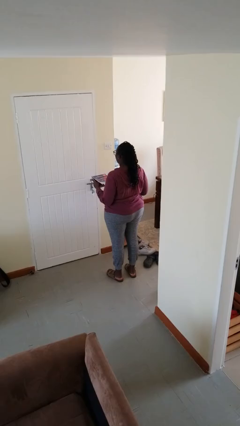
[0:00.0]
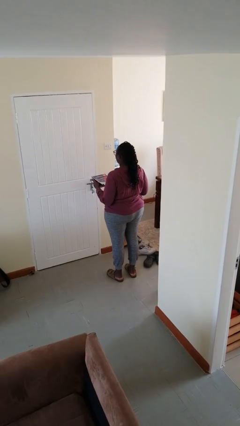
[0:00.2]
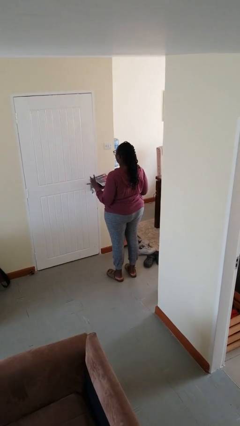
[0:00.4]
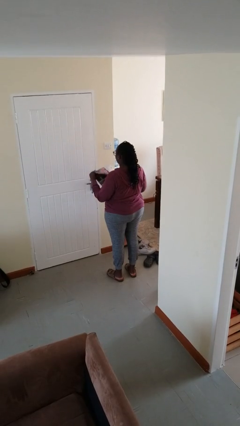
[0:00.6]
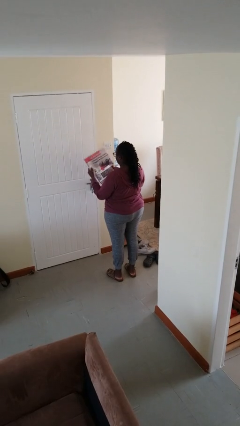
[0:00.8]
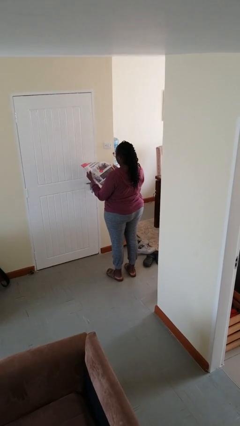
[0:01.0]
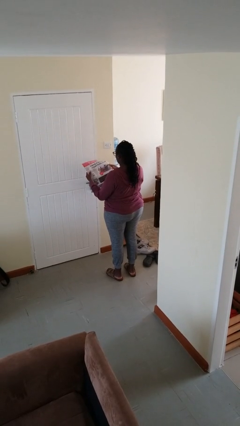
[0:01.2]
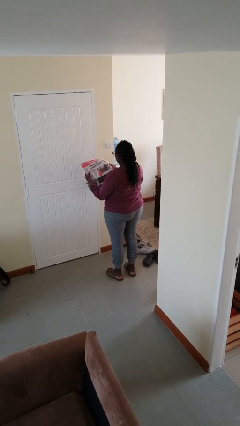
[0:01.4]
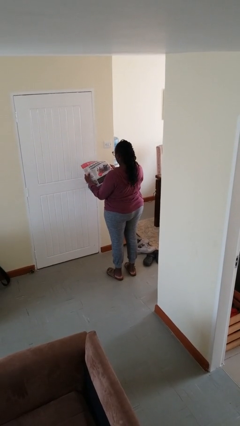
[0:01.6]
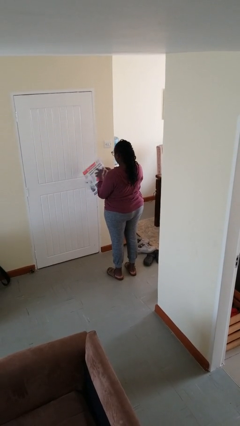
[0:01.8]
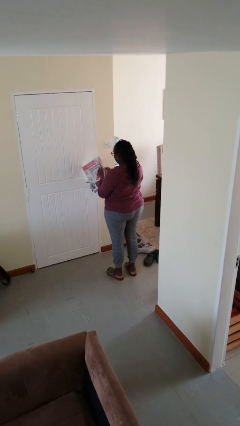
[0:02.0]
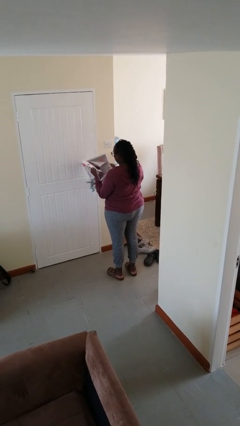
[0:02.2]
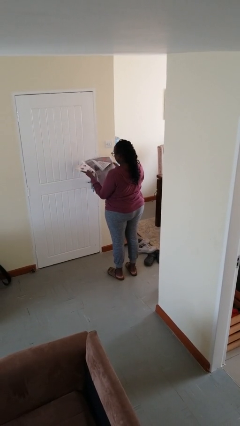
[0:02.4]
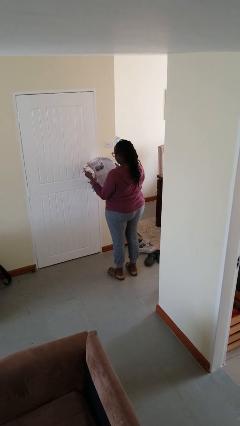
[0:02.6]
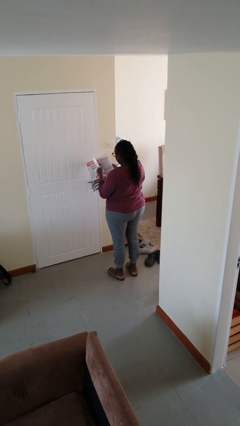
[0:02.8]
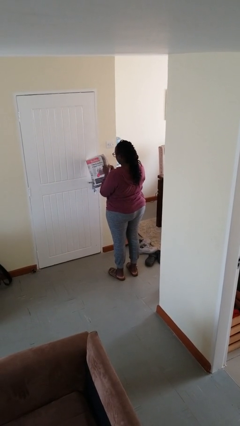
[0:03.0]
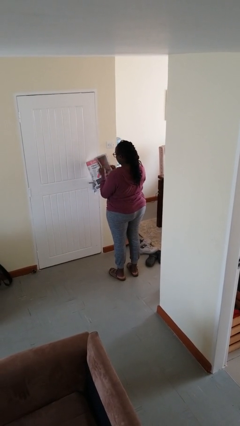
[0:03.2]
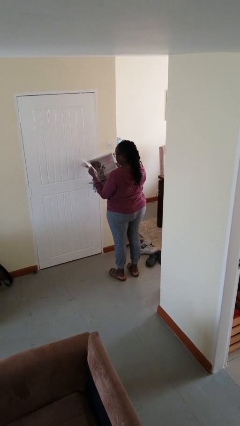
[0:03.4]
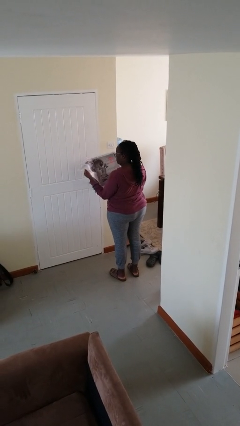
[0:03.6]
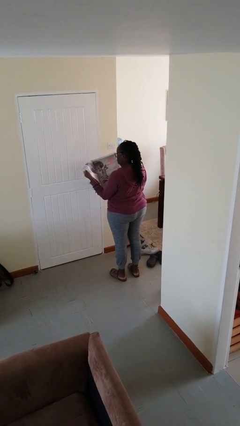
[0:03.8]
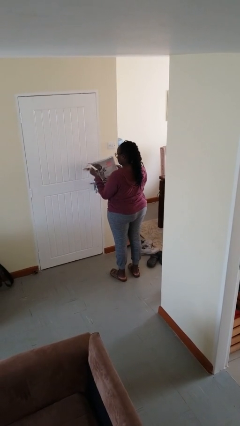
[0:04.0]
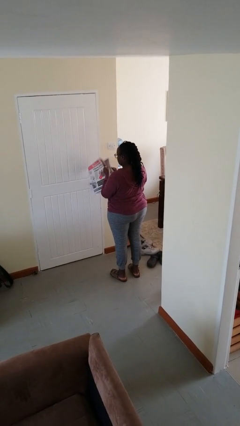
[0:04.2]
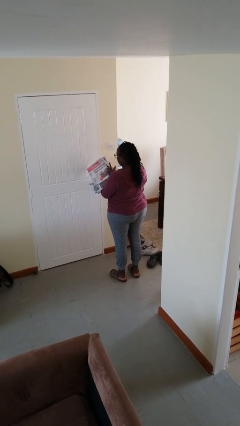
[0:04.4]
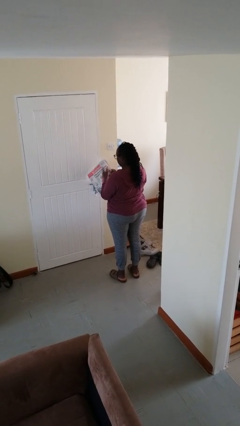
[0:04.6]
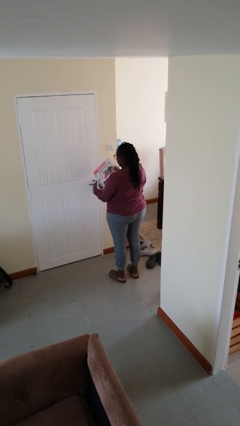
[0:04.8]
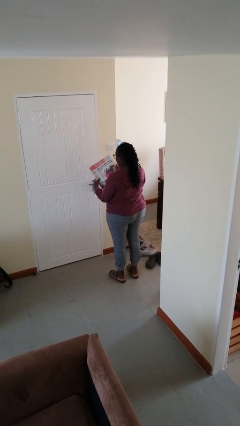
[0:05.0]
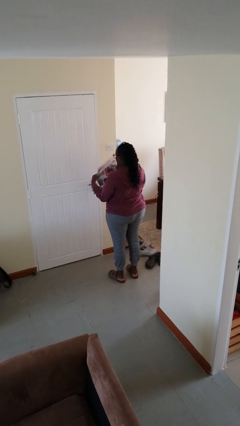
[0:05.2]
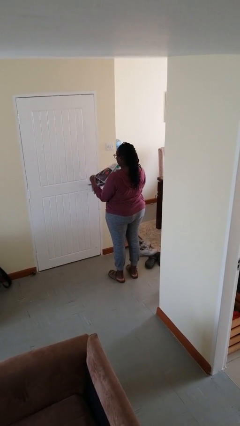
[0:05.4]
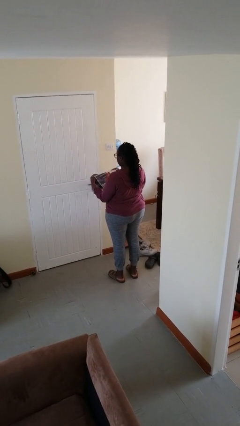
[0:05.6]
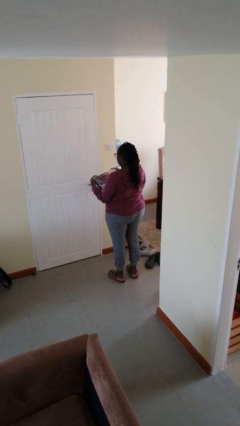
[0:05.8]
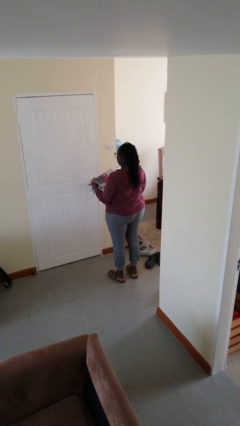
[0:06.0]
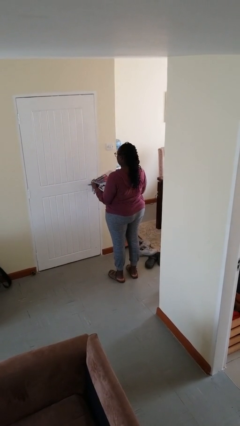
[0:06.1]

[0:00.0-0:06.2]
person reads newspaper

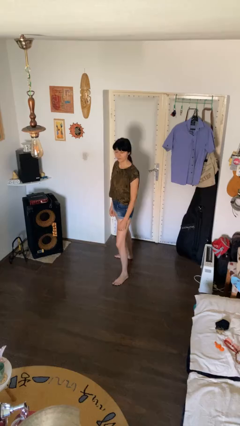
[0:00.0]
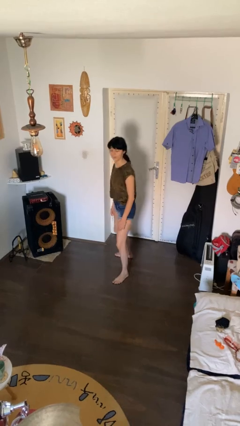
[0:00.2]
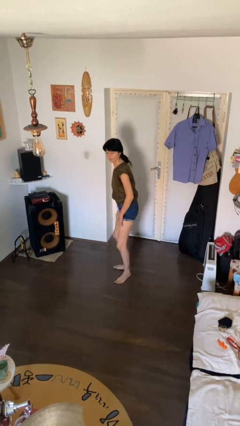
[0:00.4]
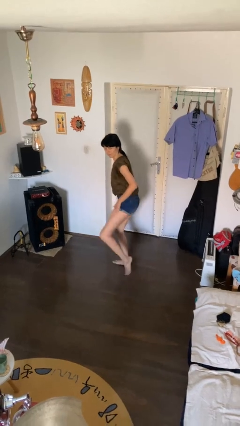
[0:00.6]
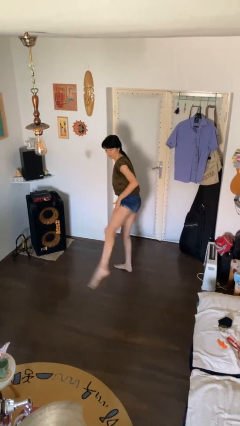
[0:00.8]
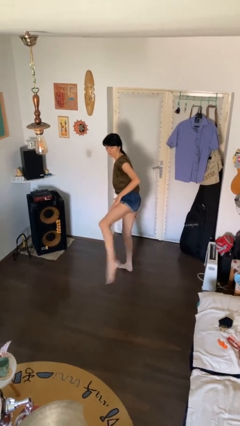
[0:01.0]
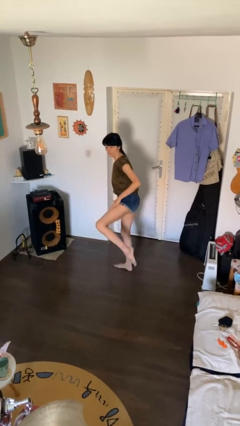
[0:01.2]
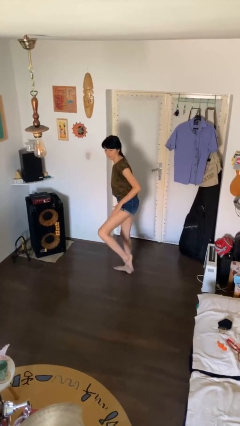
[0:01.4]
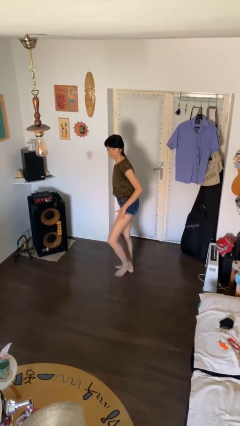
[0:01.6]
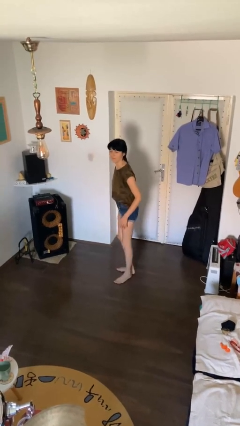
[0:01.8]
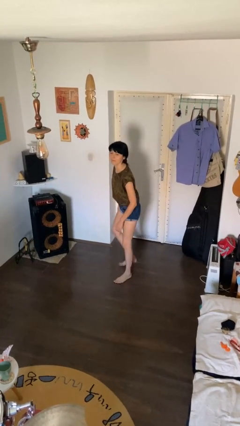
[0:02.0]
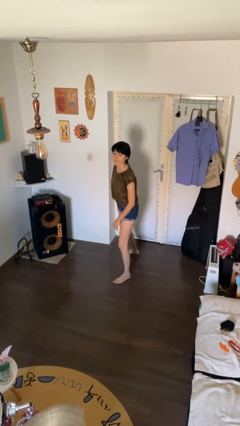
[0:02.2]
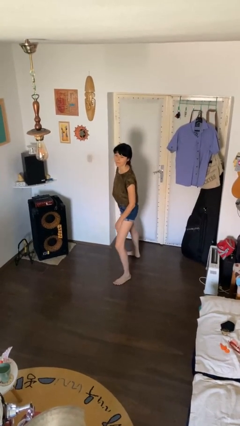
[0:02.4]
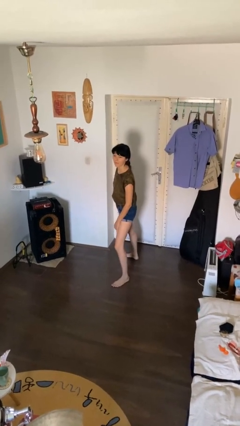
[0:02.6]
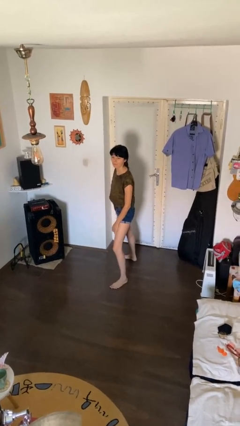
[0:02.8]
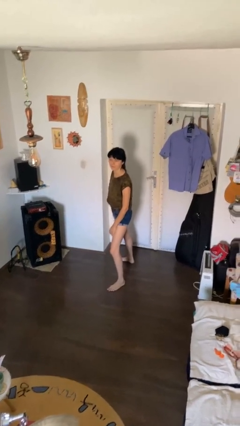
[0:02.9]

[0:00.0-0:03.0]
person karate kicks

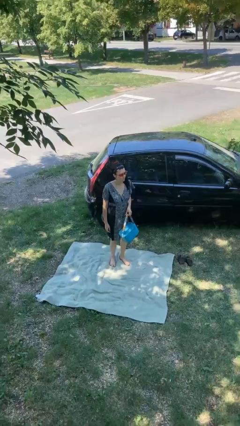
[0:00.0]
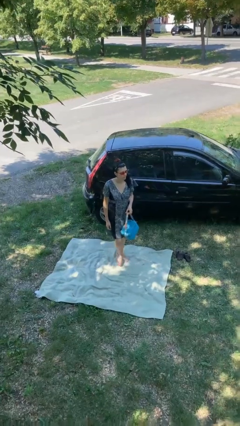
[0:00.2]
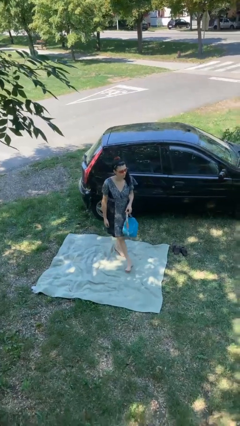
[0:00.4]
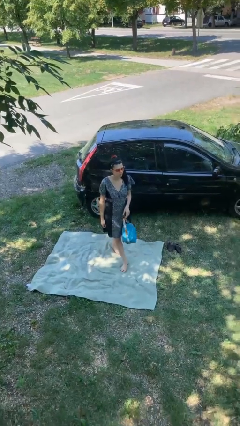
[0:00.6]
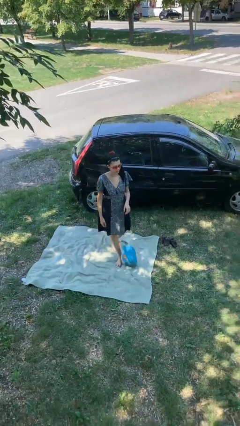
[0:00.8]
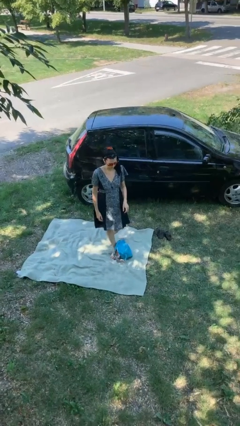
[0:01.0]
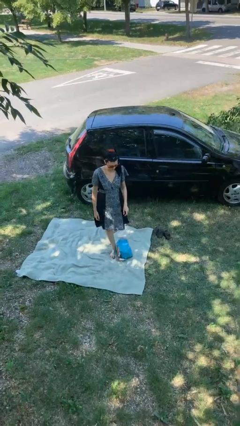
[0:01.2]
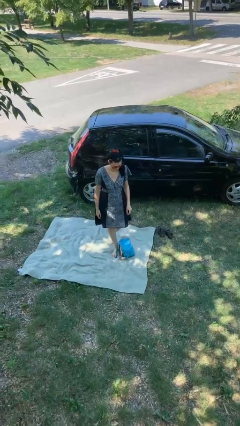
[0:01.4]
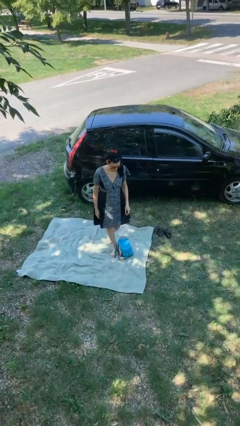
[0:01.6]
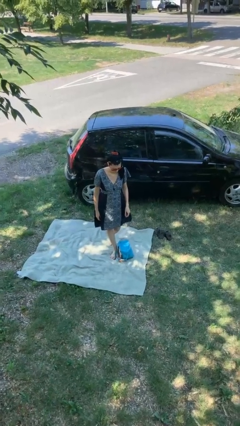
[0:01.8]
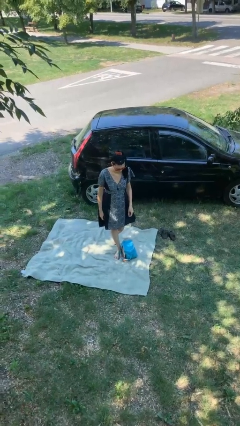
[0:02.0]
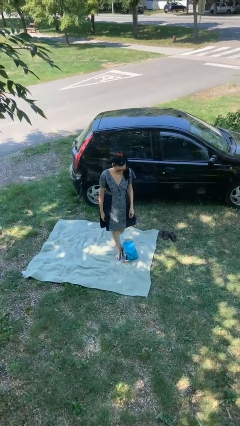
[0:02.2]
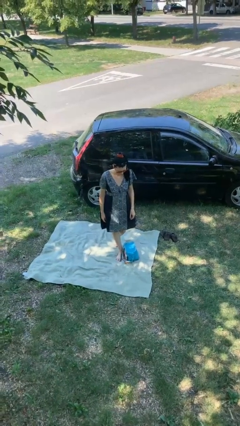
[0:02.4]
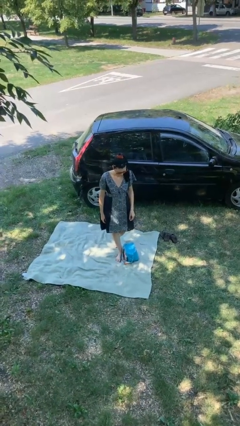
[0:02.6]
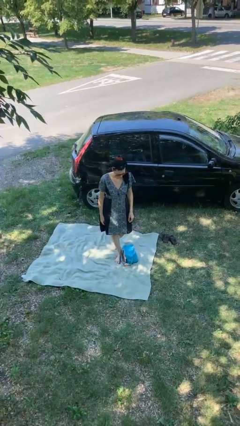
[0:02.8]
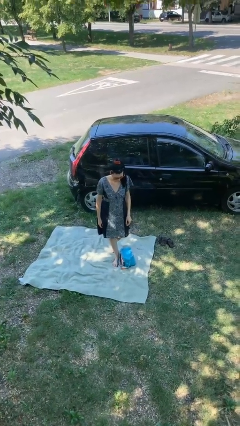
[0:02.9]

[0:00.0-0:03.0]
person drops object

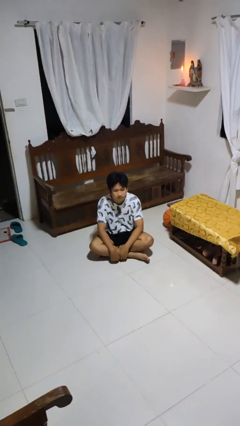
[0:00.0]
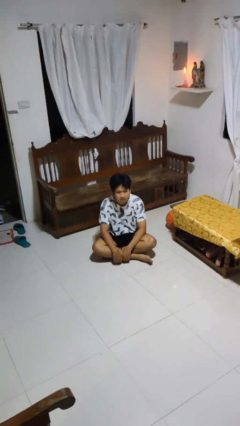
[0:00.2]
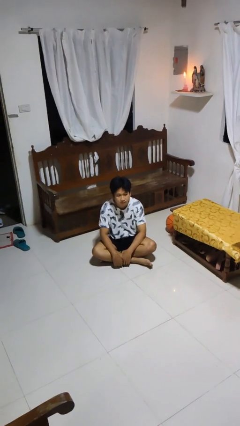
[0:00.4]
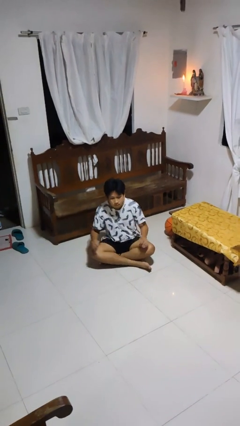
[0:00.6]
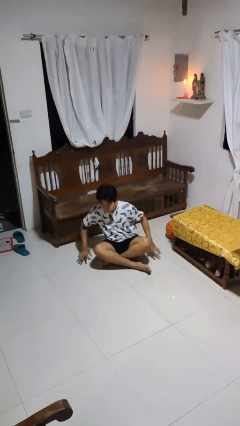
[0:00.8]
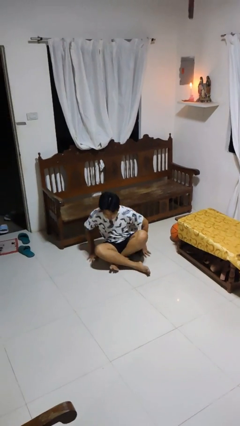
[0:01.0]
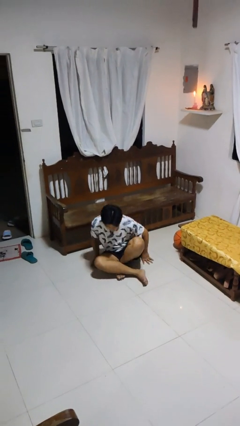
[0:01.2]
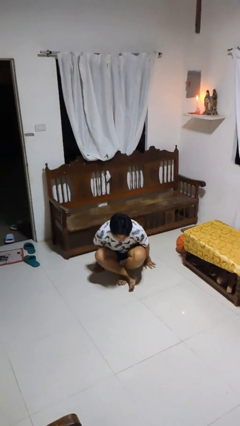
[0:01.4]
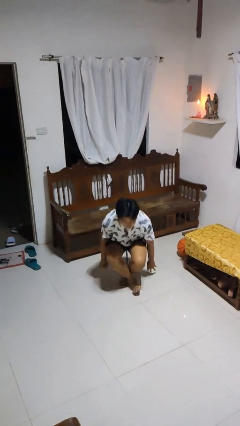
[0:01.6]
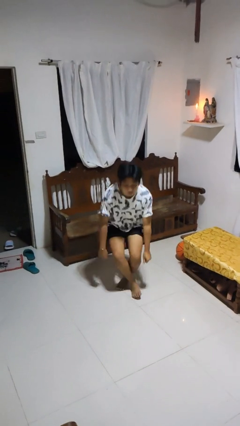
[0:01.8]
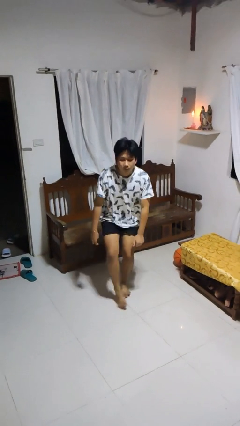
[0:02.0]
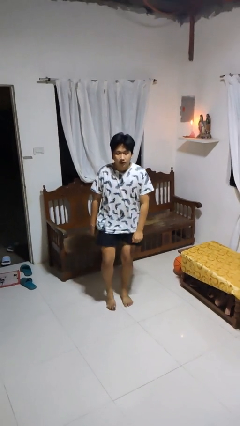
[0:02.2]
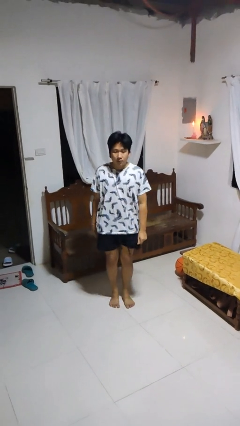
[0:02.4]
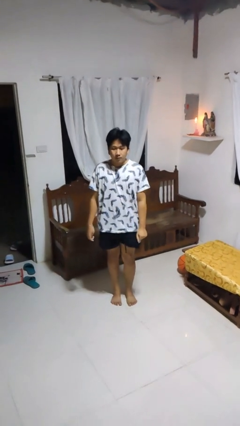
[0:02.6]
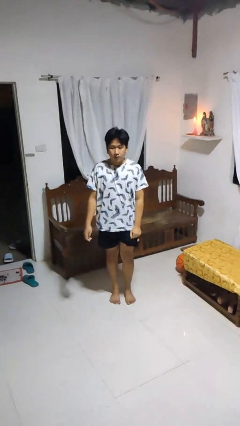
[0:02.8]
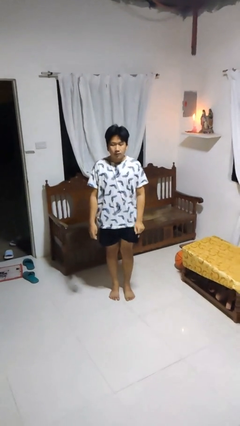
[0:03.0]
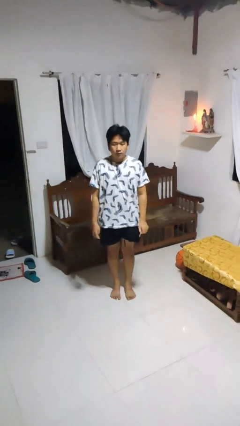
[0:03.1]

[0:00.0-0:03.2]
person stands up from floor

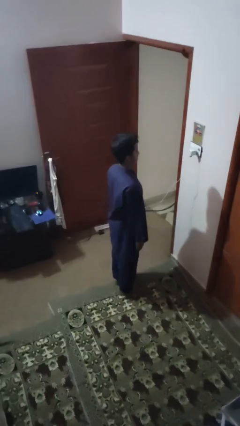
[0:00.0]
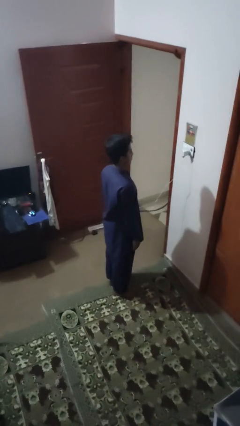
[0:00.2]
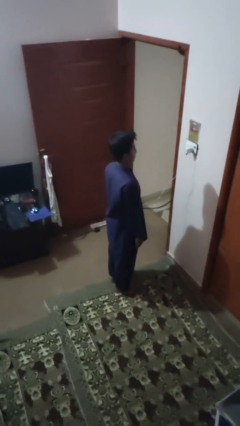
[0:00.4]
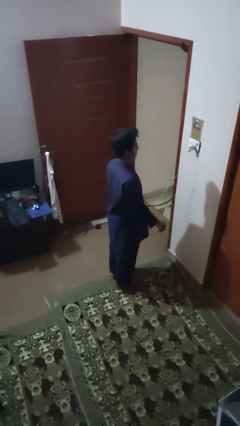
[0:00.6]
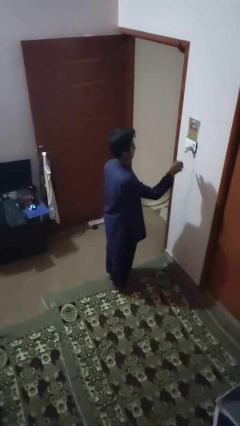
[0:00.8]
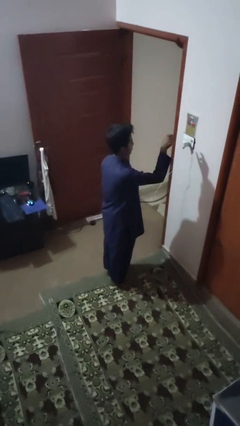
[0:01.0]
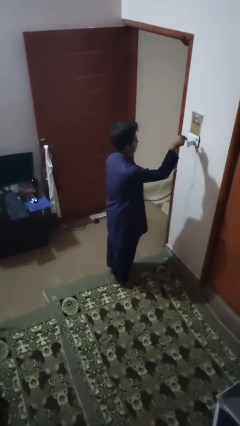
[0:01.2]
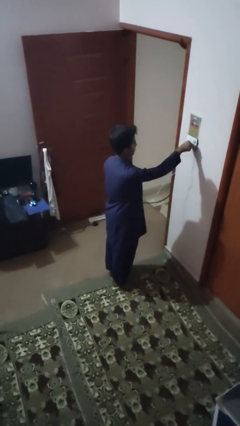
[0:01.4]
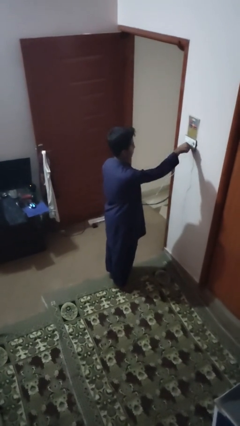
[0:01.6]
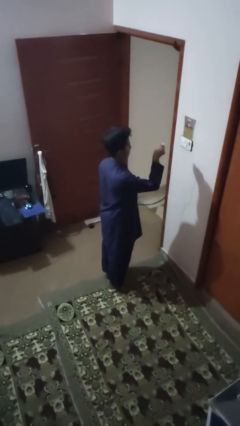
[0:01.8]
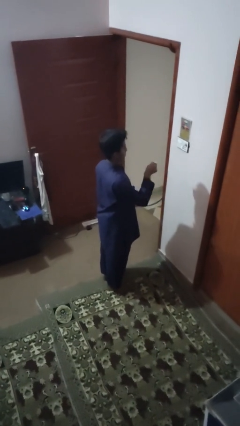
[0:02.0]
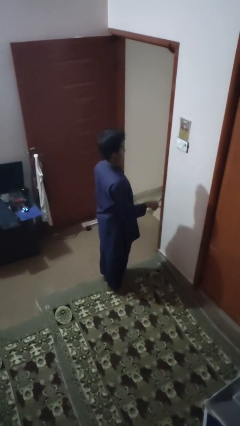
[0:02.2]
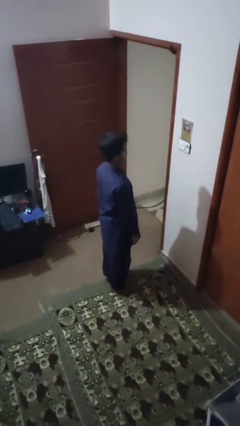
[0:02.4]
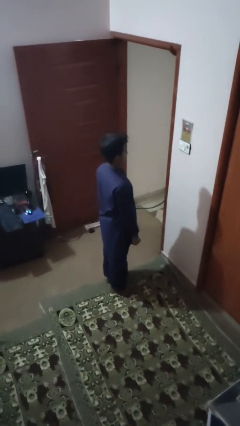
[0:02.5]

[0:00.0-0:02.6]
person unplugs from electrical socket
